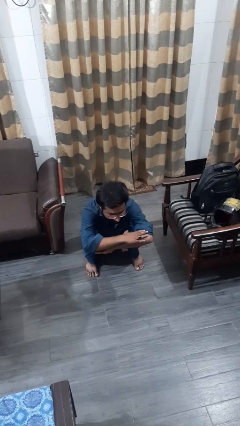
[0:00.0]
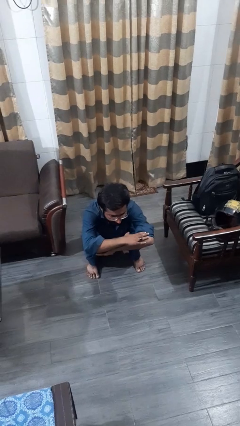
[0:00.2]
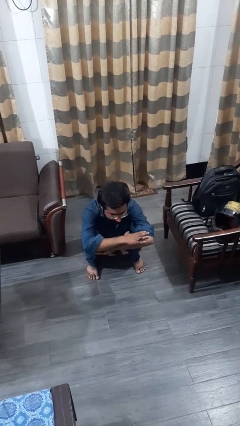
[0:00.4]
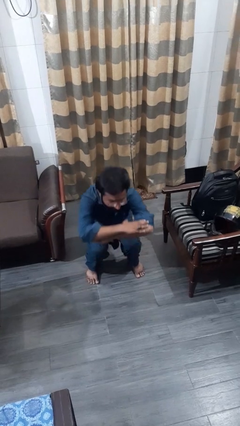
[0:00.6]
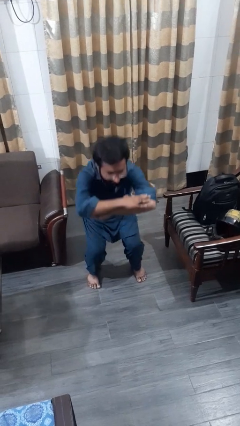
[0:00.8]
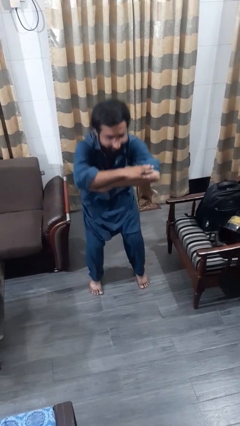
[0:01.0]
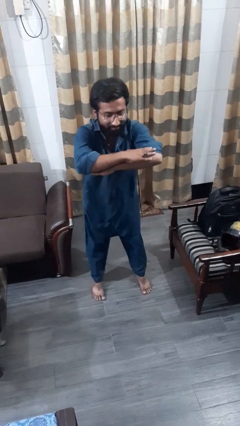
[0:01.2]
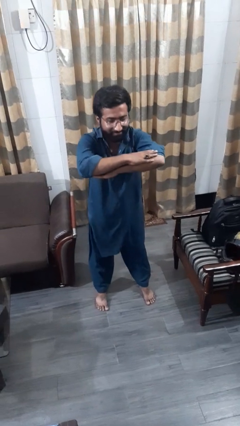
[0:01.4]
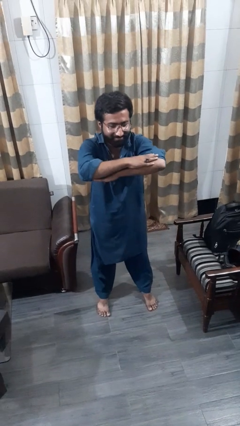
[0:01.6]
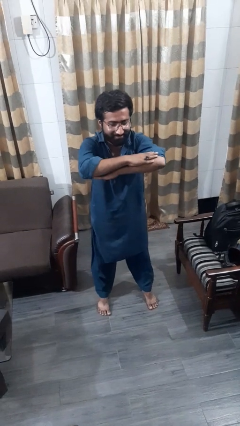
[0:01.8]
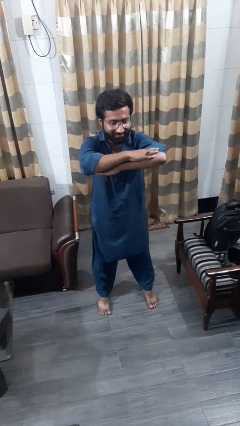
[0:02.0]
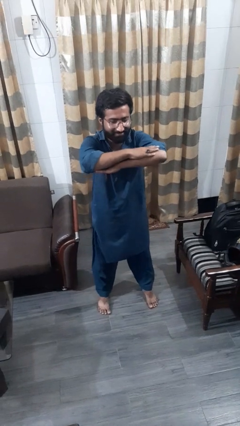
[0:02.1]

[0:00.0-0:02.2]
person stands up

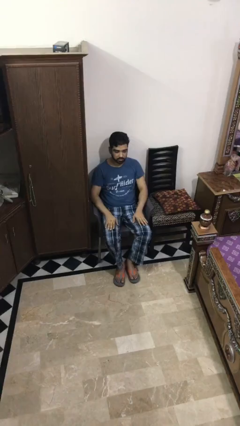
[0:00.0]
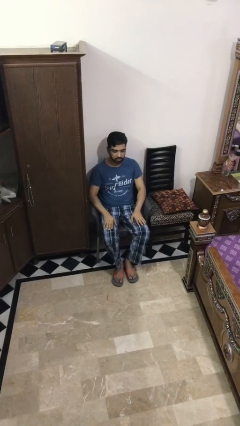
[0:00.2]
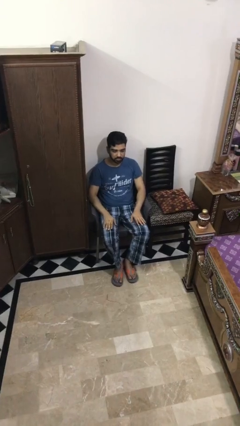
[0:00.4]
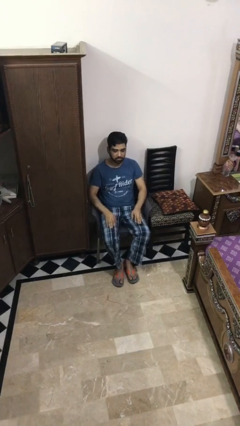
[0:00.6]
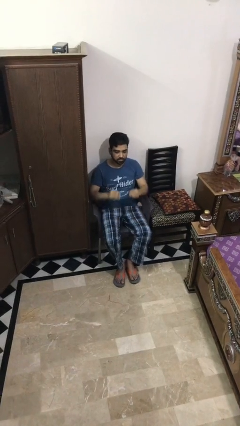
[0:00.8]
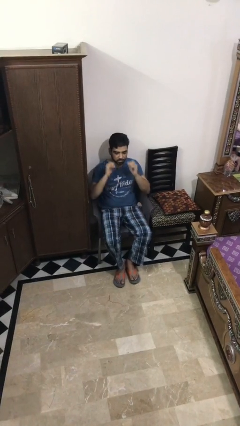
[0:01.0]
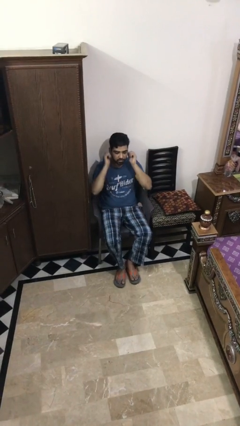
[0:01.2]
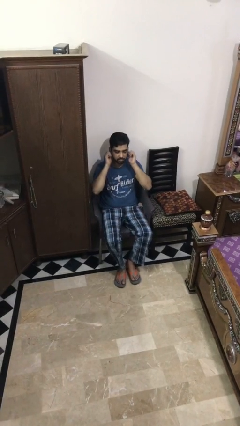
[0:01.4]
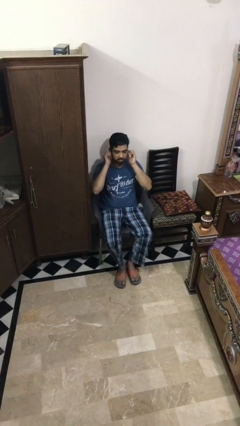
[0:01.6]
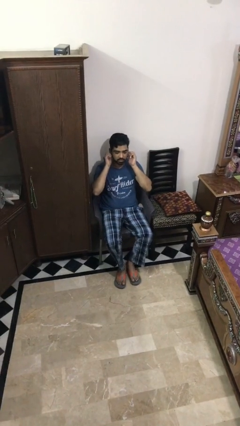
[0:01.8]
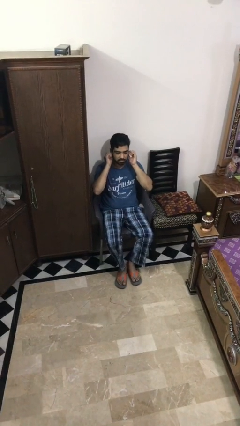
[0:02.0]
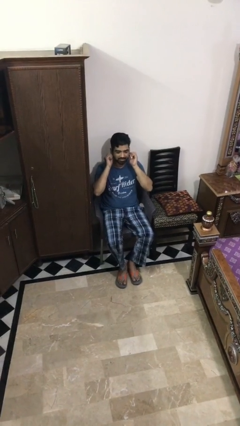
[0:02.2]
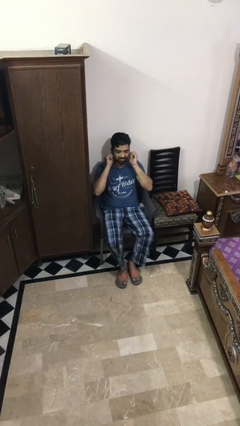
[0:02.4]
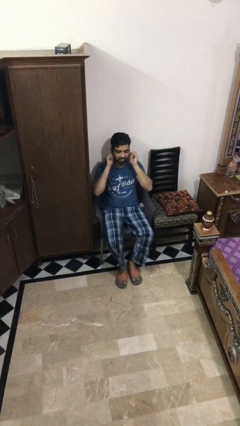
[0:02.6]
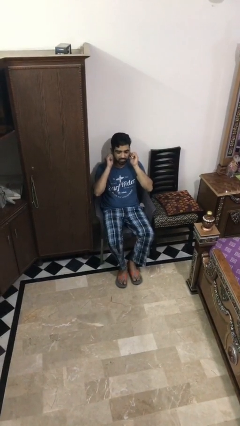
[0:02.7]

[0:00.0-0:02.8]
person touches earlobe

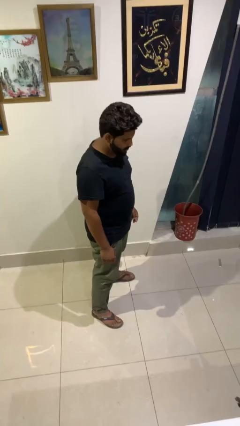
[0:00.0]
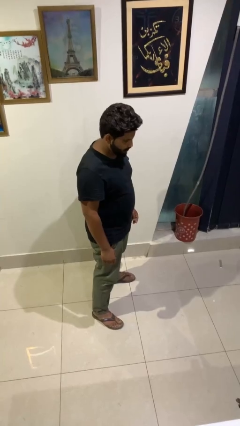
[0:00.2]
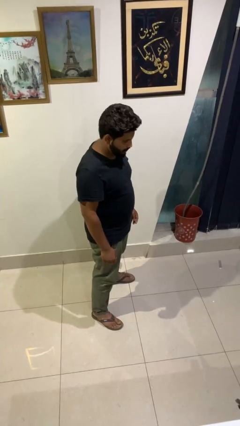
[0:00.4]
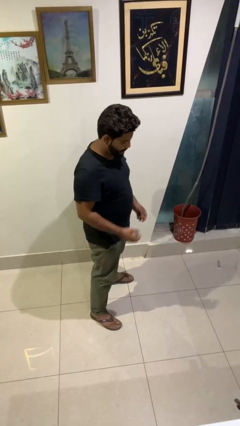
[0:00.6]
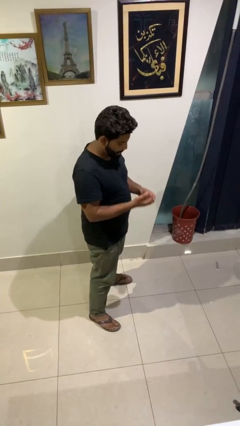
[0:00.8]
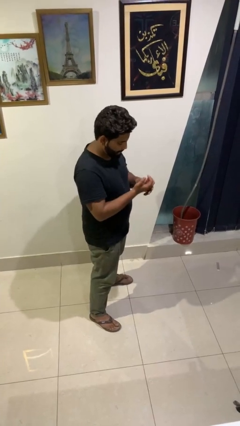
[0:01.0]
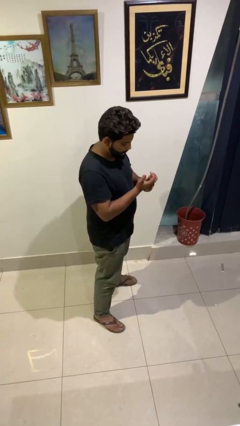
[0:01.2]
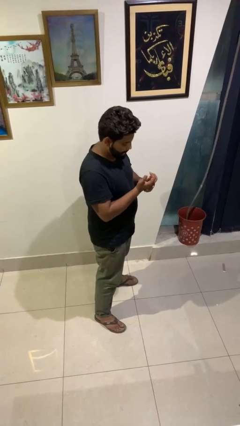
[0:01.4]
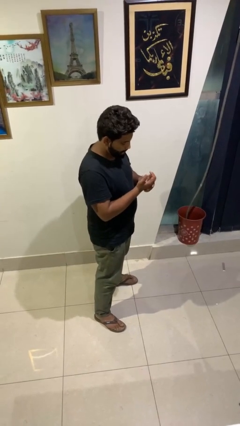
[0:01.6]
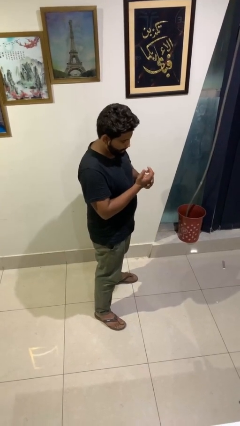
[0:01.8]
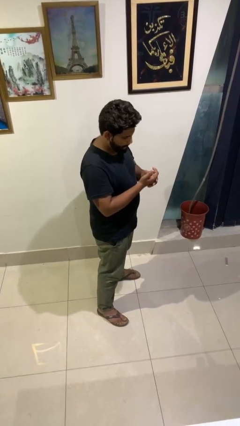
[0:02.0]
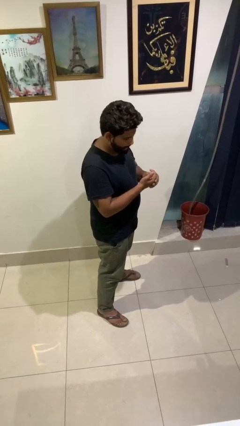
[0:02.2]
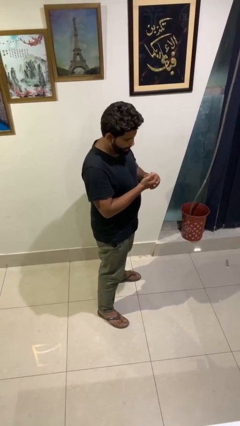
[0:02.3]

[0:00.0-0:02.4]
person cracks knuckles

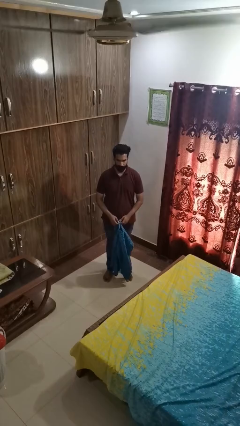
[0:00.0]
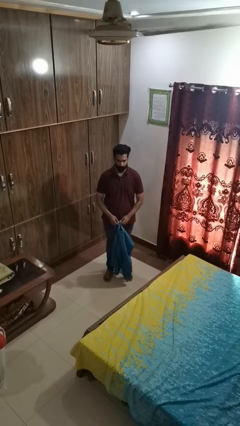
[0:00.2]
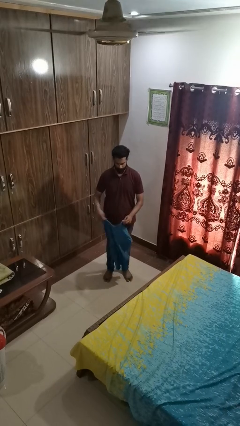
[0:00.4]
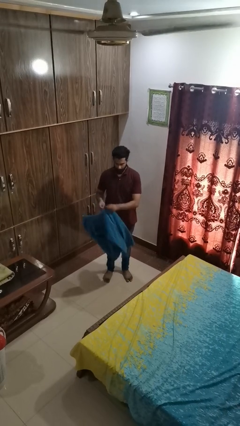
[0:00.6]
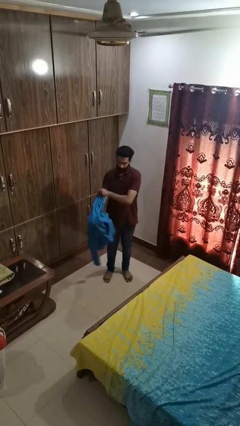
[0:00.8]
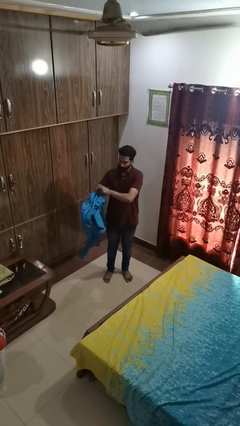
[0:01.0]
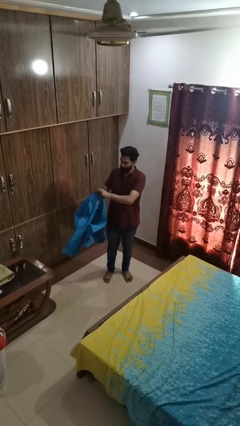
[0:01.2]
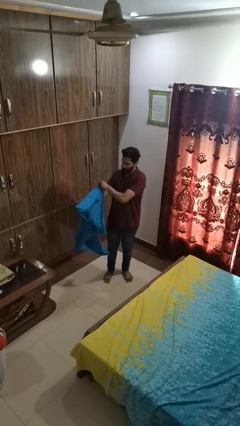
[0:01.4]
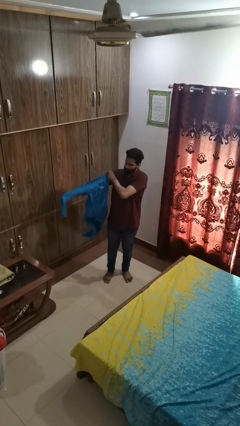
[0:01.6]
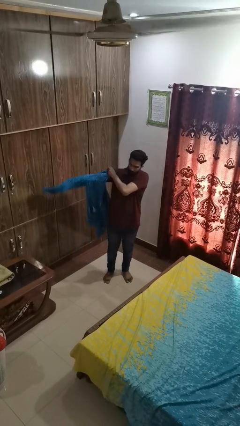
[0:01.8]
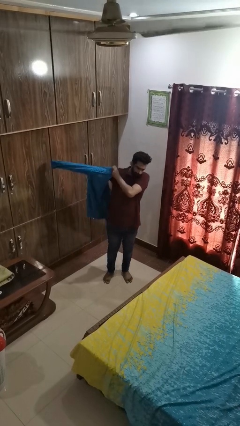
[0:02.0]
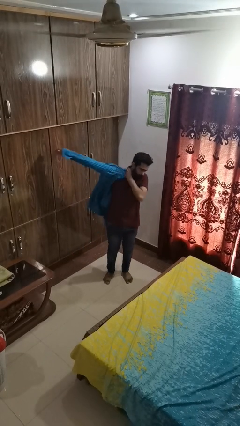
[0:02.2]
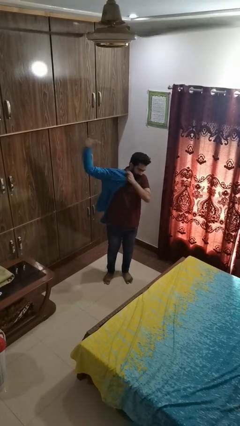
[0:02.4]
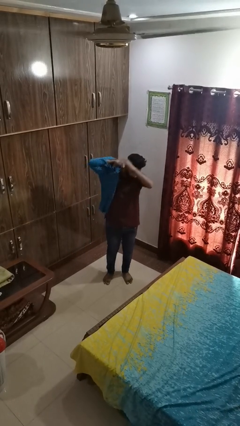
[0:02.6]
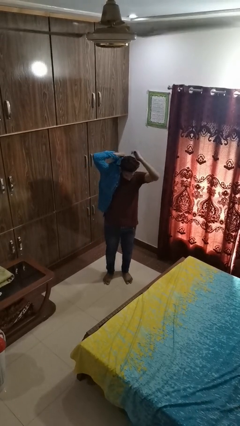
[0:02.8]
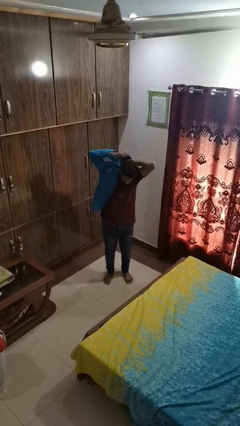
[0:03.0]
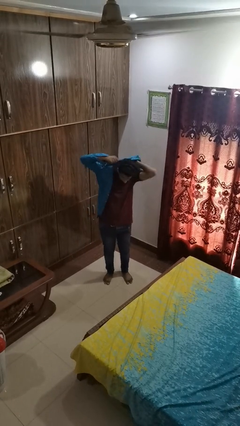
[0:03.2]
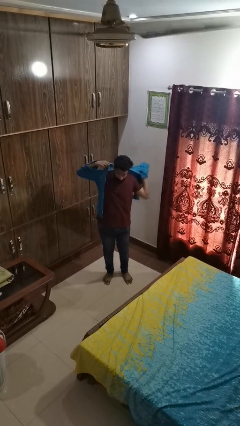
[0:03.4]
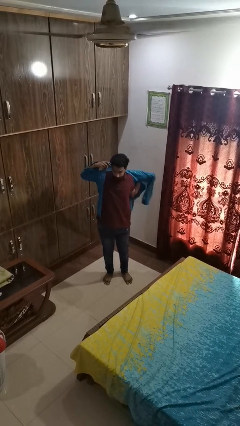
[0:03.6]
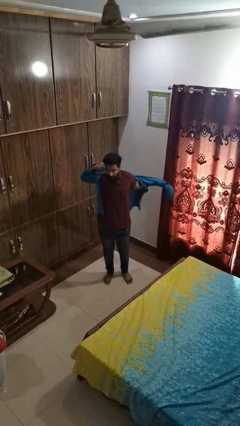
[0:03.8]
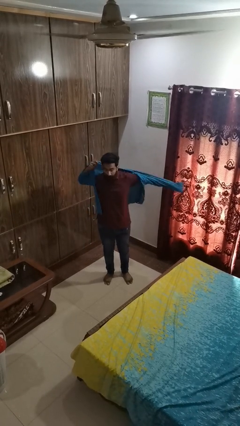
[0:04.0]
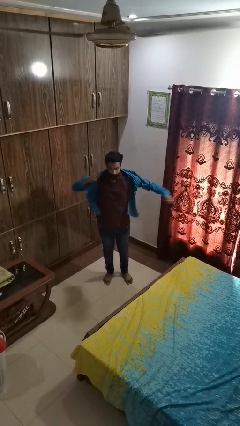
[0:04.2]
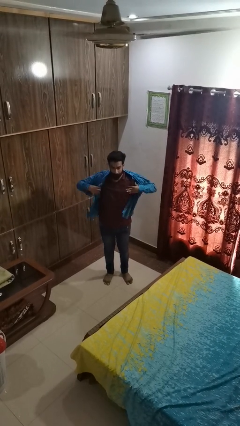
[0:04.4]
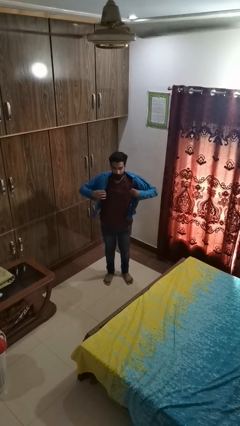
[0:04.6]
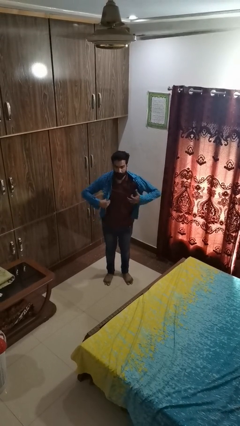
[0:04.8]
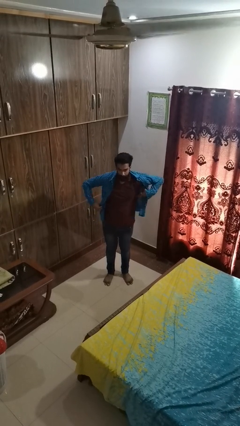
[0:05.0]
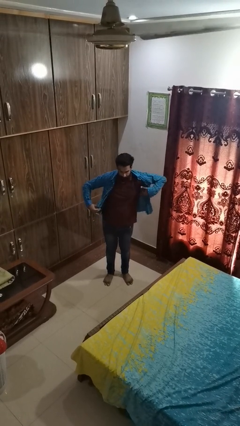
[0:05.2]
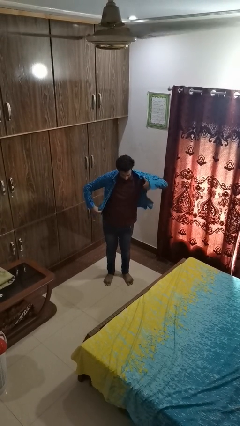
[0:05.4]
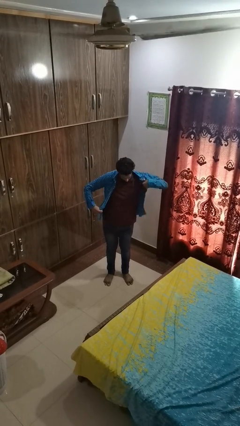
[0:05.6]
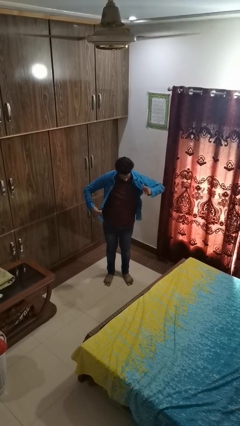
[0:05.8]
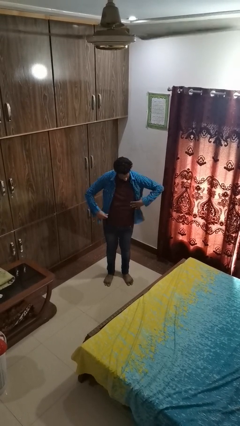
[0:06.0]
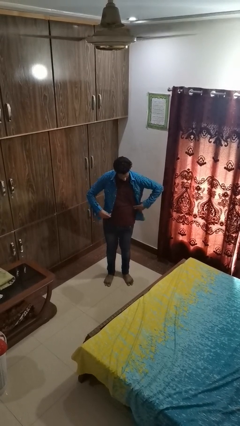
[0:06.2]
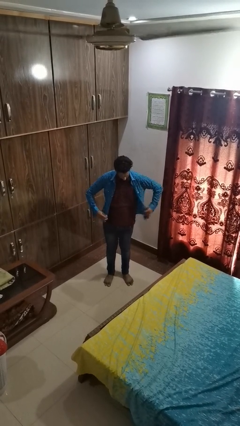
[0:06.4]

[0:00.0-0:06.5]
person puts on shirt

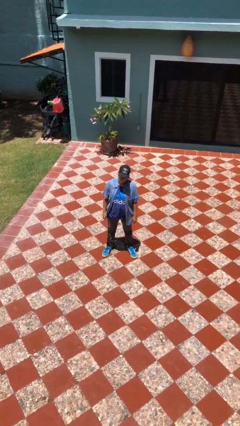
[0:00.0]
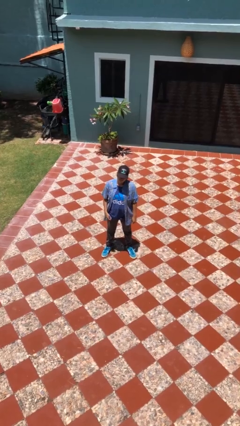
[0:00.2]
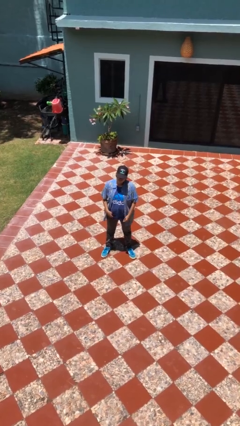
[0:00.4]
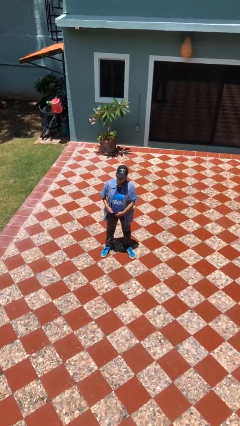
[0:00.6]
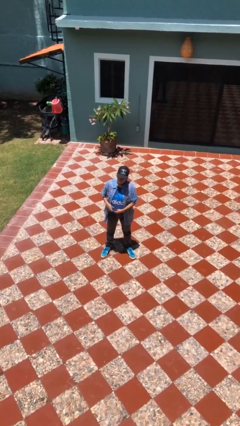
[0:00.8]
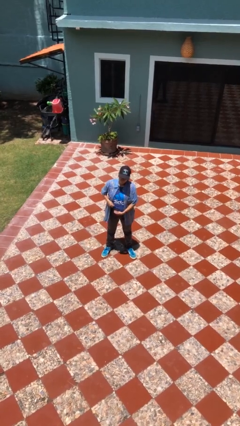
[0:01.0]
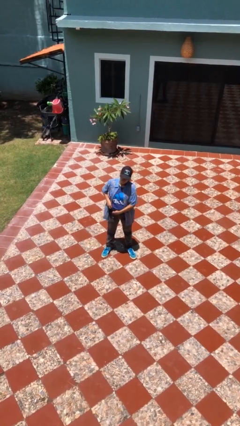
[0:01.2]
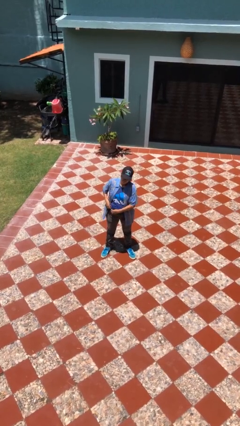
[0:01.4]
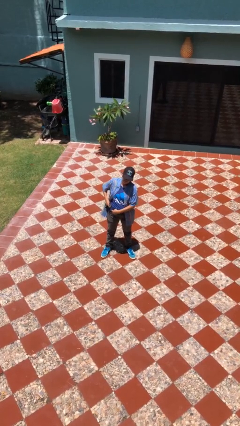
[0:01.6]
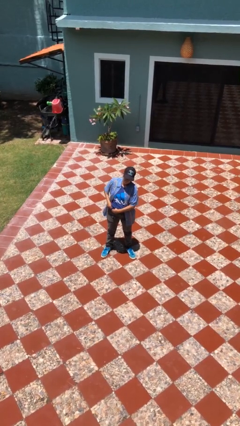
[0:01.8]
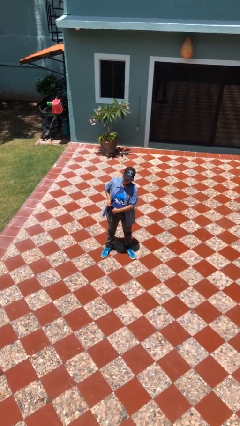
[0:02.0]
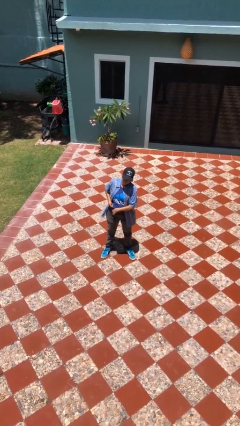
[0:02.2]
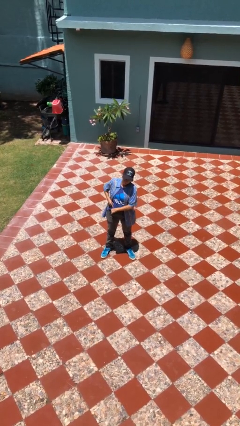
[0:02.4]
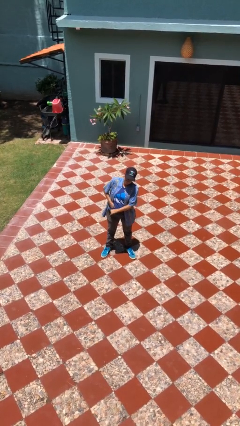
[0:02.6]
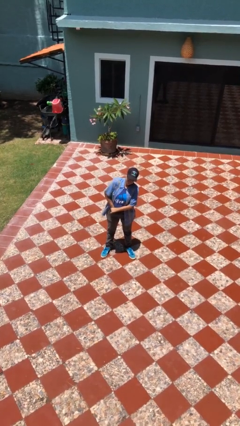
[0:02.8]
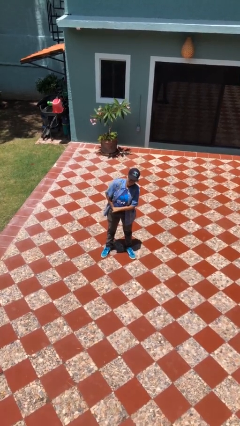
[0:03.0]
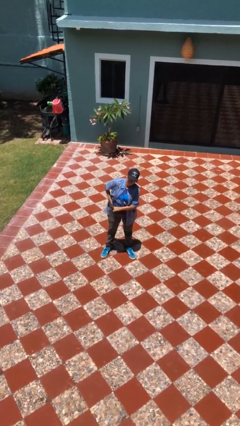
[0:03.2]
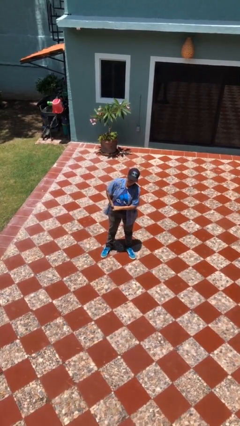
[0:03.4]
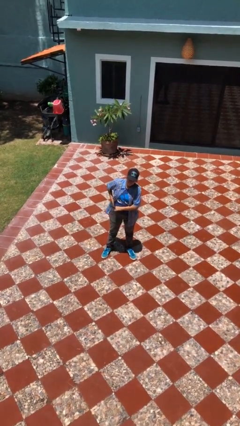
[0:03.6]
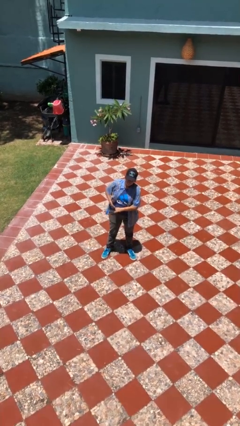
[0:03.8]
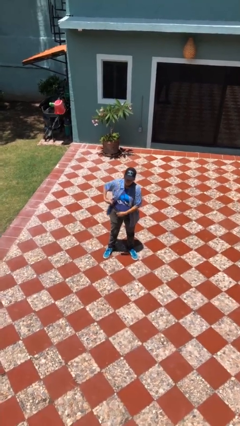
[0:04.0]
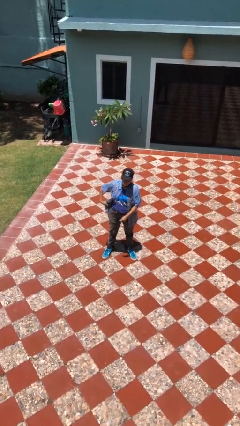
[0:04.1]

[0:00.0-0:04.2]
person tucks in shirt
